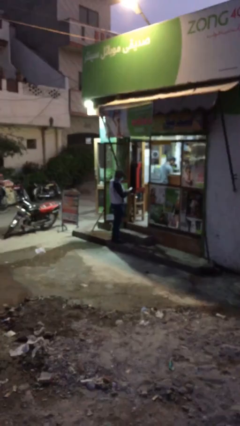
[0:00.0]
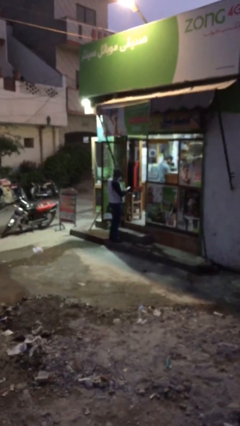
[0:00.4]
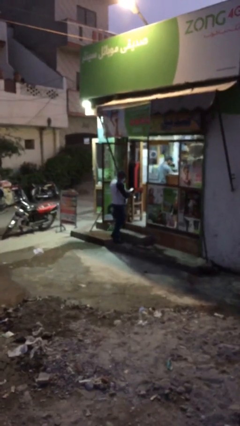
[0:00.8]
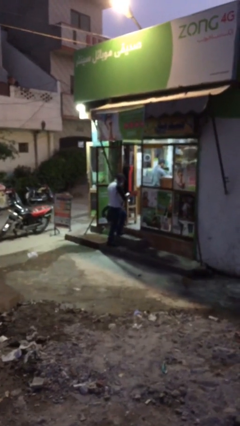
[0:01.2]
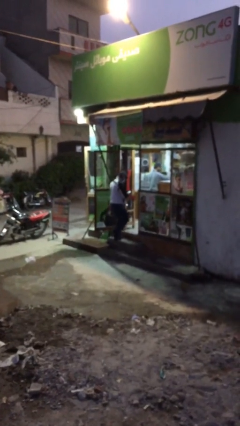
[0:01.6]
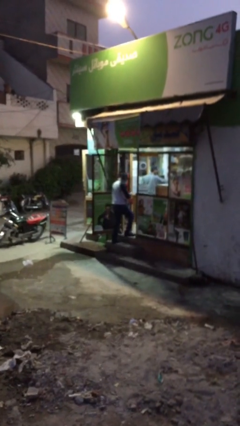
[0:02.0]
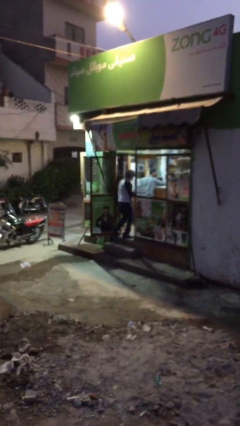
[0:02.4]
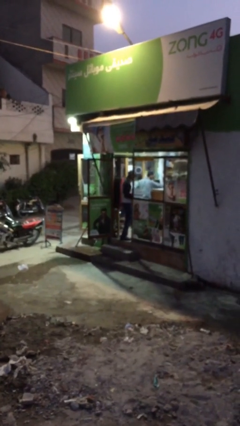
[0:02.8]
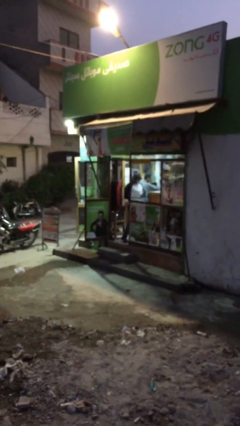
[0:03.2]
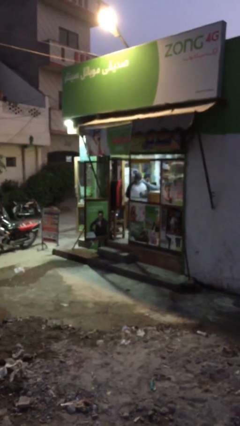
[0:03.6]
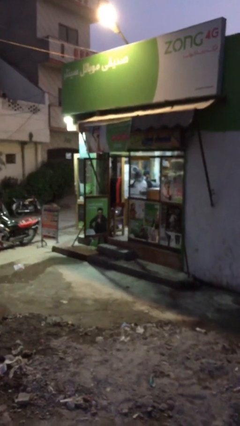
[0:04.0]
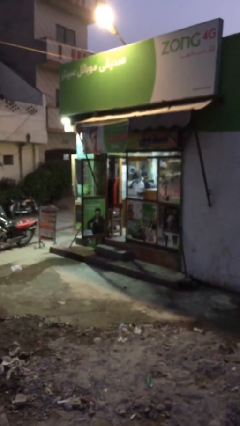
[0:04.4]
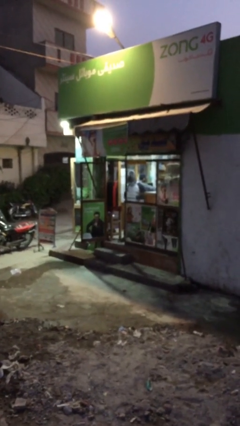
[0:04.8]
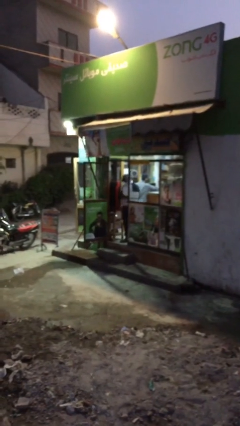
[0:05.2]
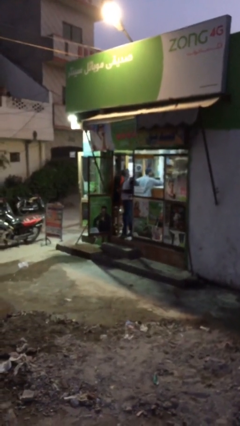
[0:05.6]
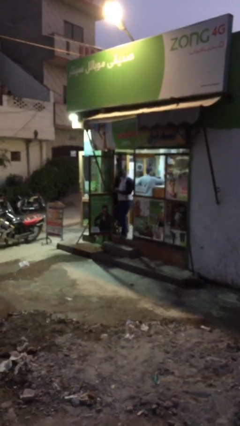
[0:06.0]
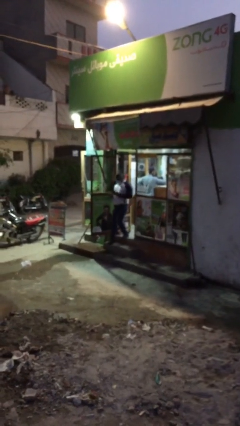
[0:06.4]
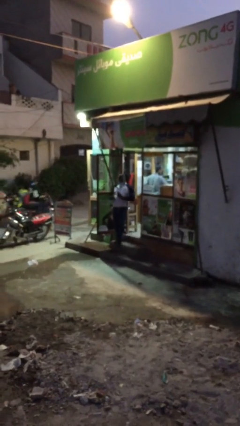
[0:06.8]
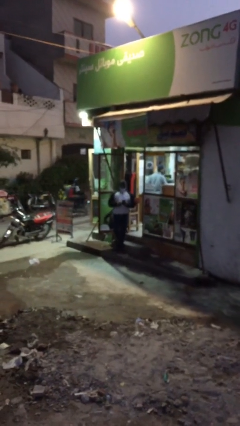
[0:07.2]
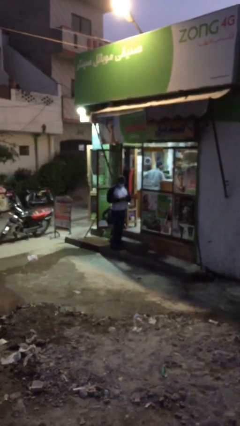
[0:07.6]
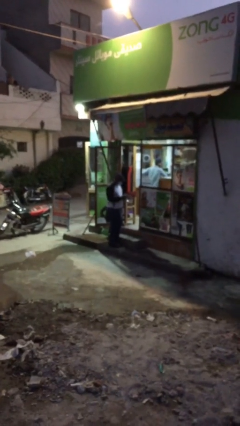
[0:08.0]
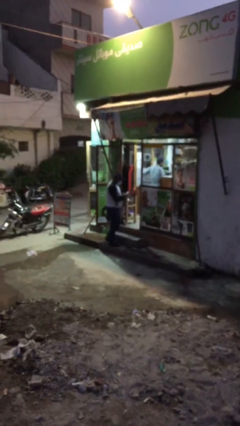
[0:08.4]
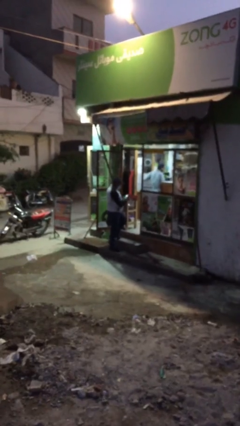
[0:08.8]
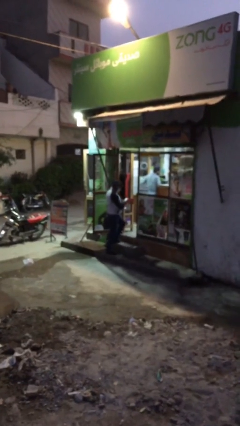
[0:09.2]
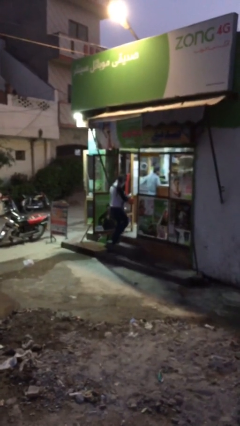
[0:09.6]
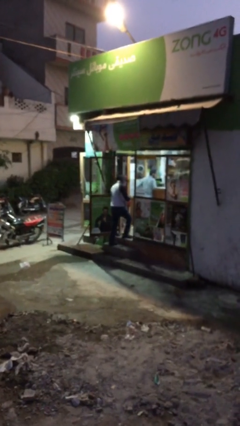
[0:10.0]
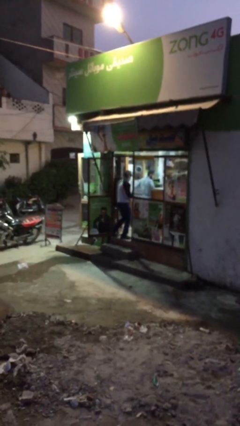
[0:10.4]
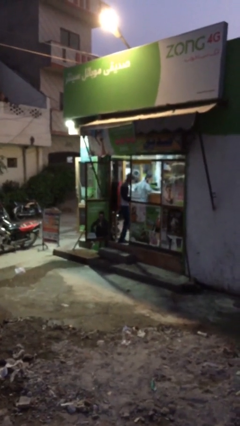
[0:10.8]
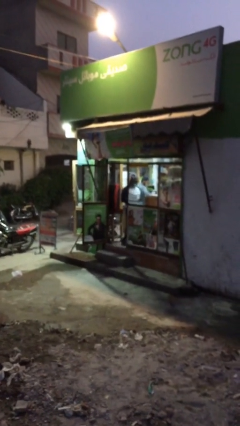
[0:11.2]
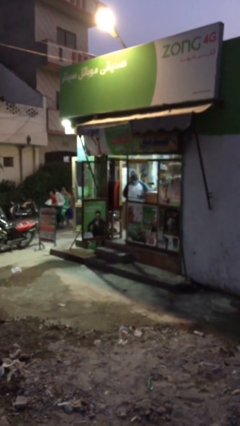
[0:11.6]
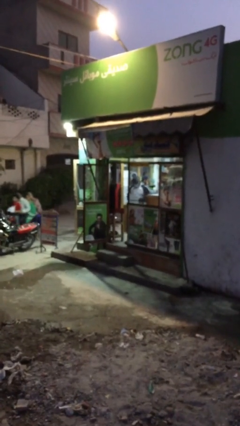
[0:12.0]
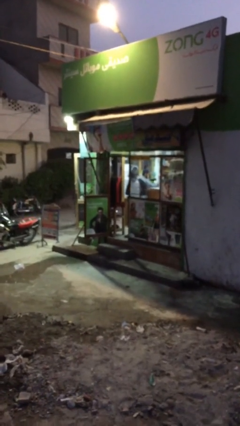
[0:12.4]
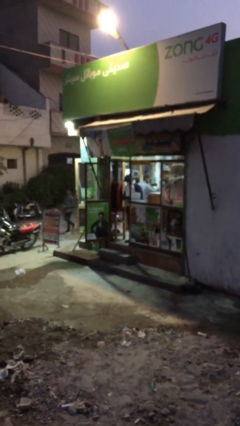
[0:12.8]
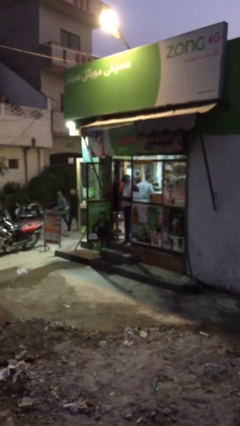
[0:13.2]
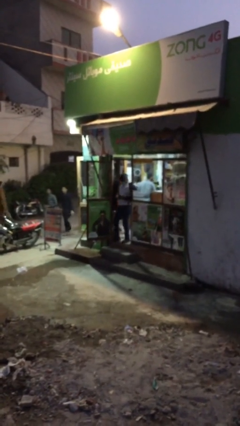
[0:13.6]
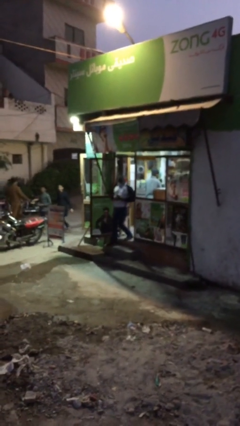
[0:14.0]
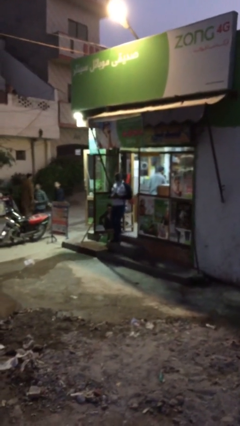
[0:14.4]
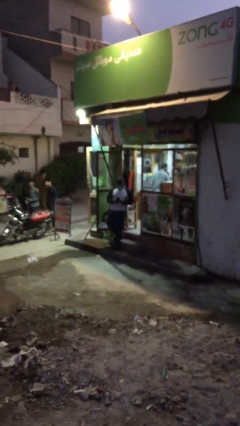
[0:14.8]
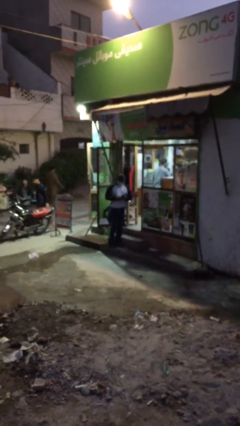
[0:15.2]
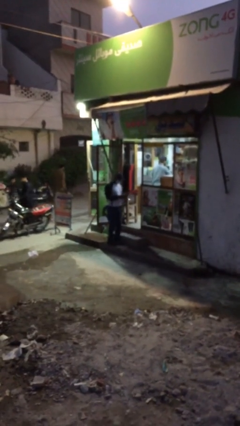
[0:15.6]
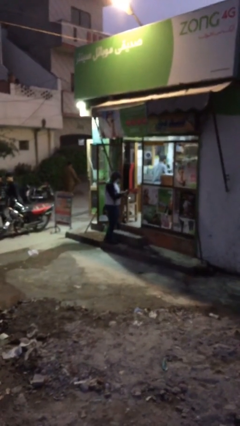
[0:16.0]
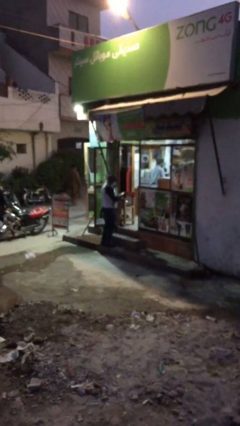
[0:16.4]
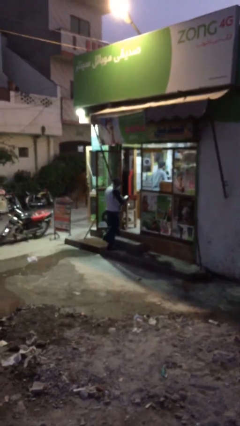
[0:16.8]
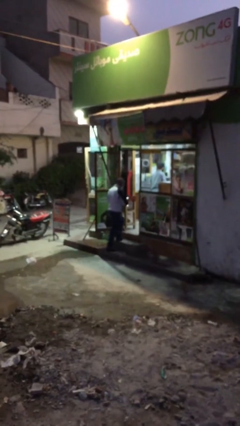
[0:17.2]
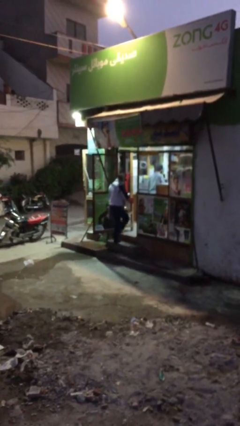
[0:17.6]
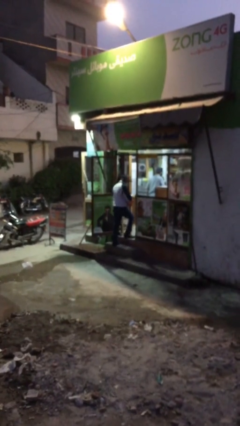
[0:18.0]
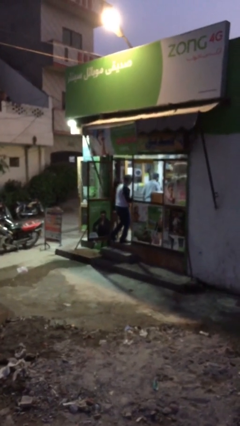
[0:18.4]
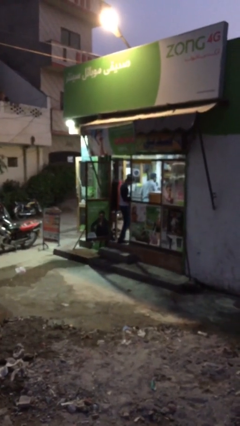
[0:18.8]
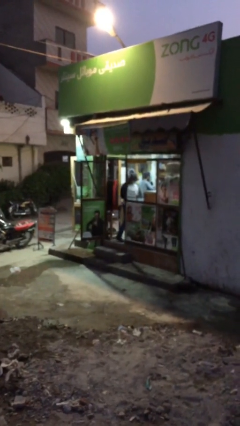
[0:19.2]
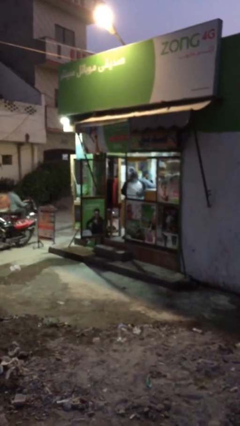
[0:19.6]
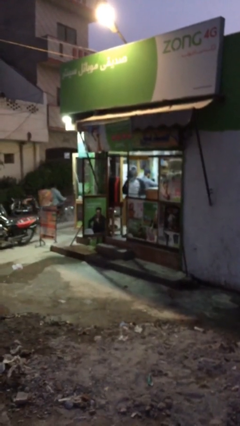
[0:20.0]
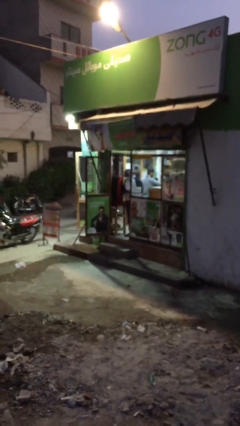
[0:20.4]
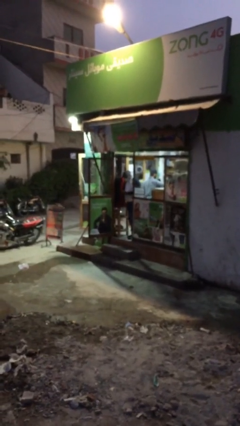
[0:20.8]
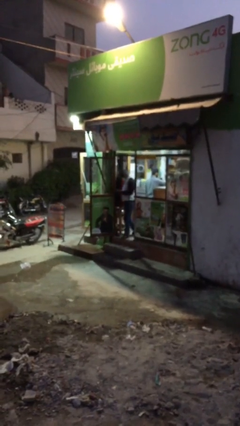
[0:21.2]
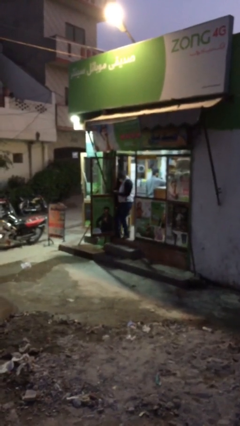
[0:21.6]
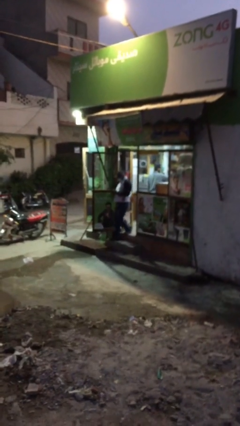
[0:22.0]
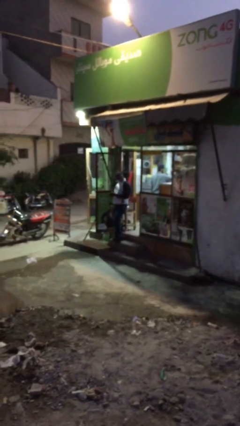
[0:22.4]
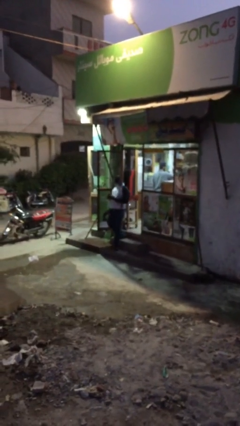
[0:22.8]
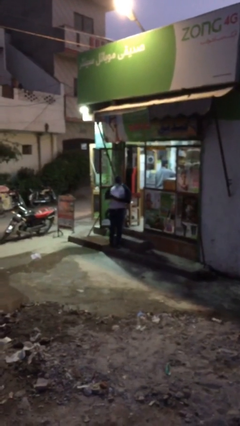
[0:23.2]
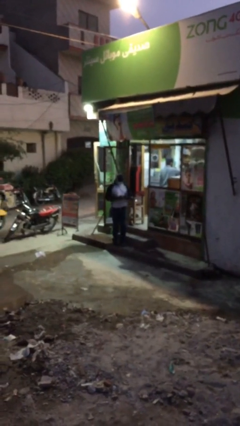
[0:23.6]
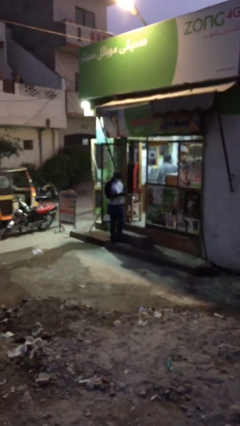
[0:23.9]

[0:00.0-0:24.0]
person texts on phone

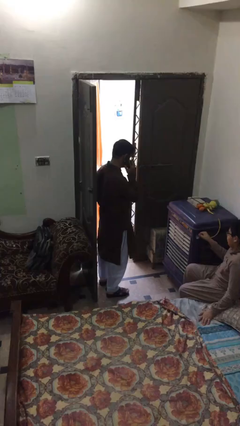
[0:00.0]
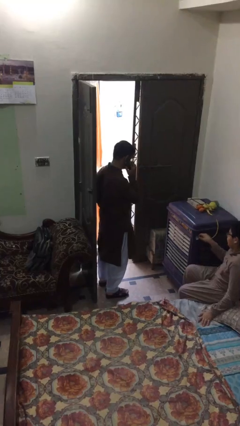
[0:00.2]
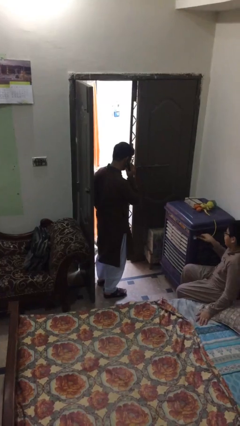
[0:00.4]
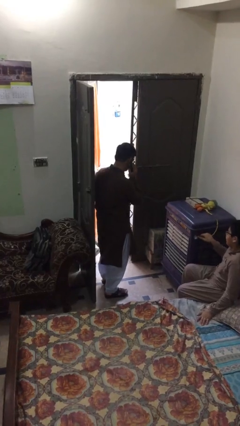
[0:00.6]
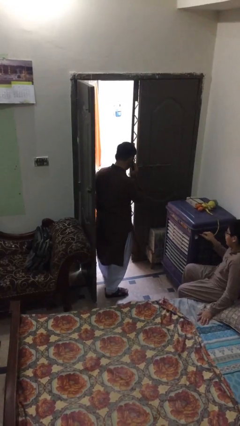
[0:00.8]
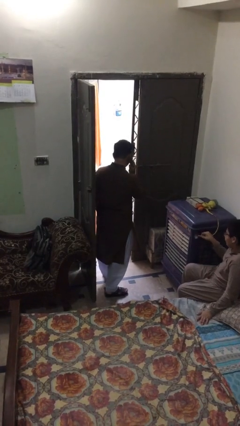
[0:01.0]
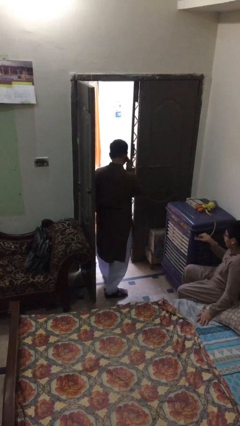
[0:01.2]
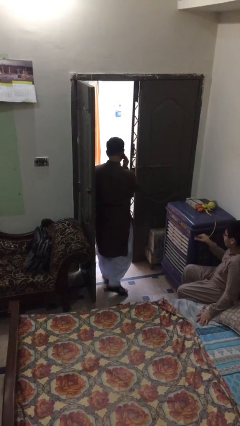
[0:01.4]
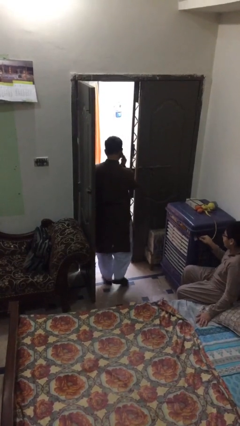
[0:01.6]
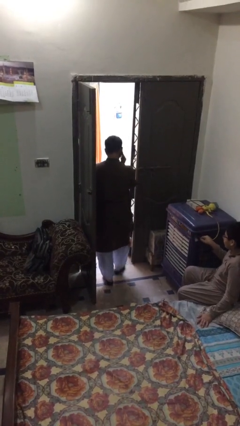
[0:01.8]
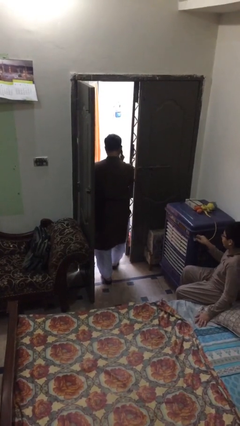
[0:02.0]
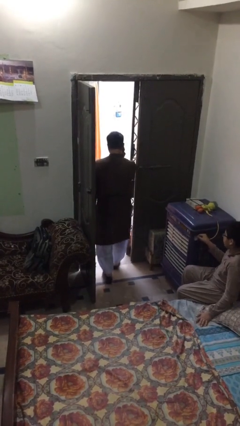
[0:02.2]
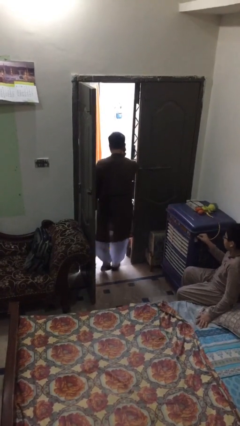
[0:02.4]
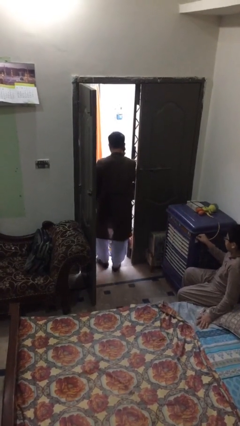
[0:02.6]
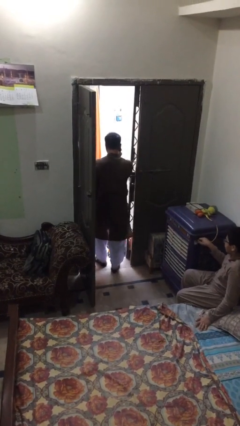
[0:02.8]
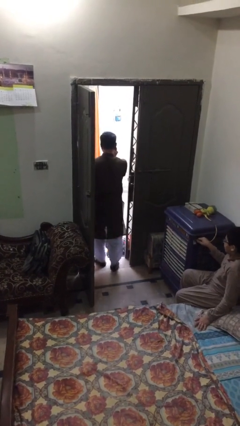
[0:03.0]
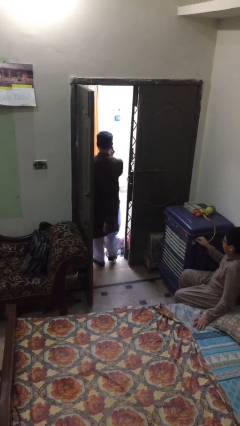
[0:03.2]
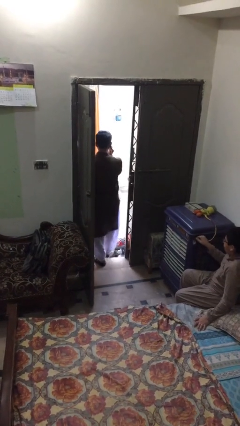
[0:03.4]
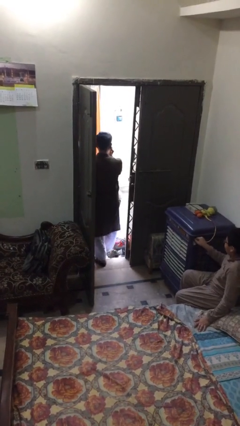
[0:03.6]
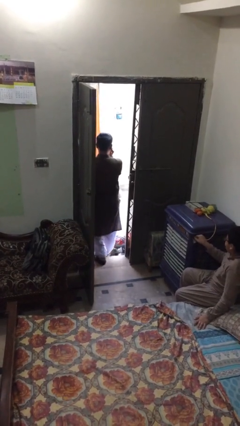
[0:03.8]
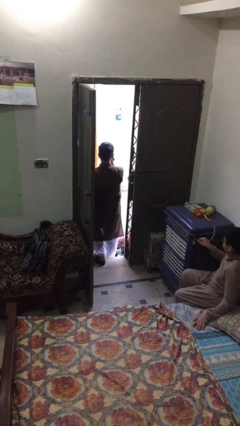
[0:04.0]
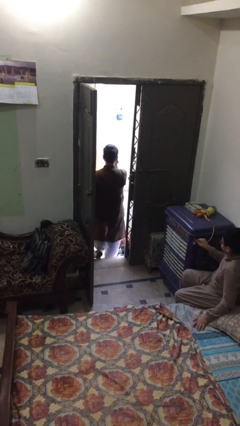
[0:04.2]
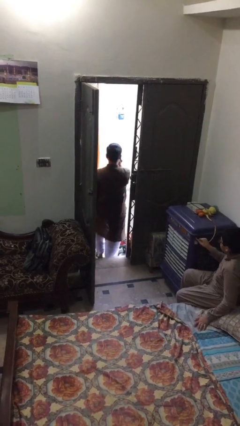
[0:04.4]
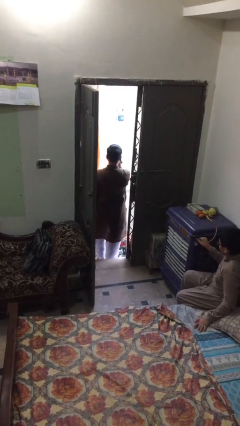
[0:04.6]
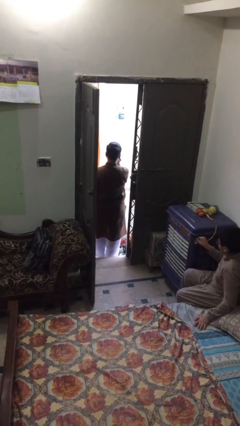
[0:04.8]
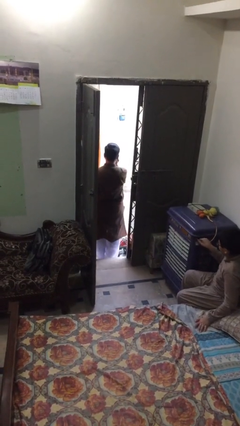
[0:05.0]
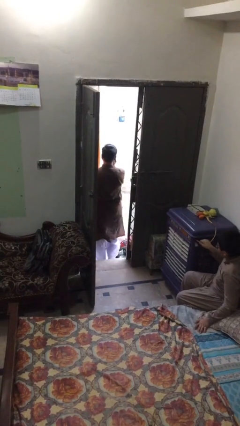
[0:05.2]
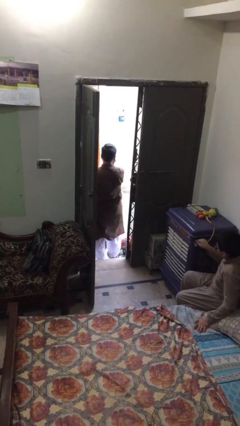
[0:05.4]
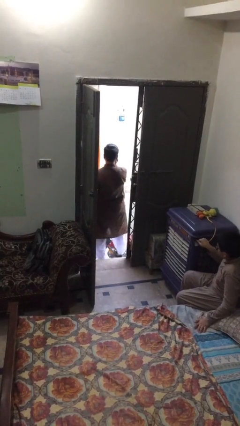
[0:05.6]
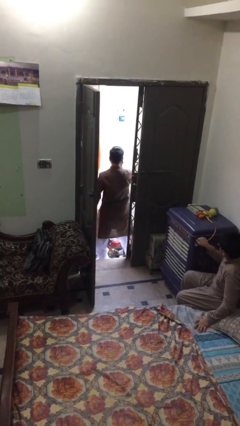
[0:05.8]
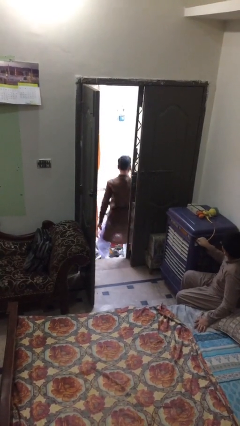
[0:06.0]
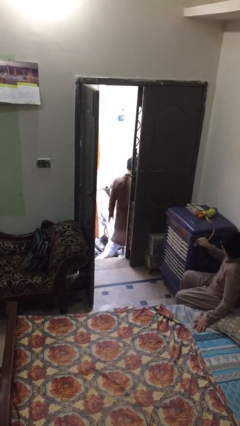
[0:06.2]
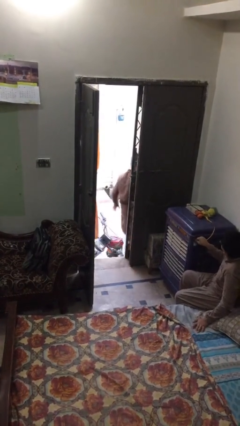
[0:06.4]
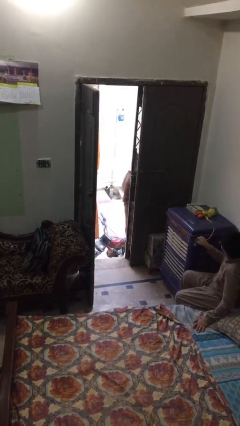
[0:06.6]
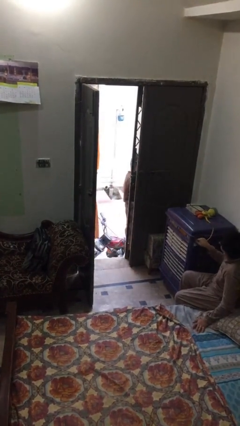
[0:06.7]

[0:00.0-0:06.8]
person exits scene through structure
